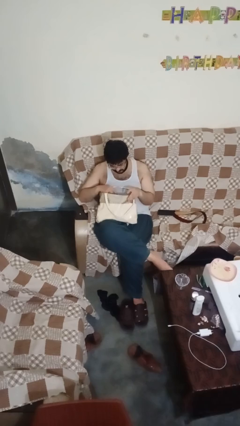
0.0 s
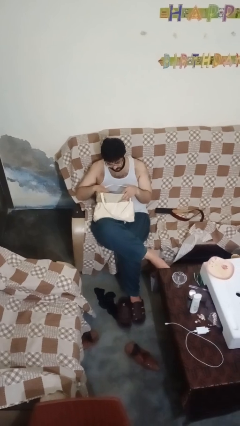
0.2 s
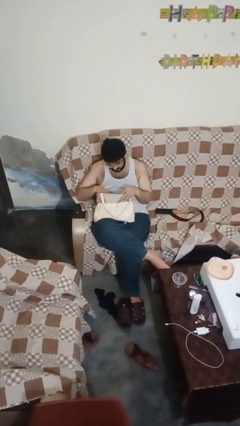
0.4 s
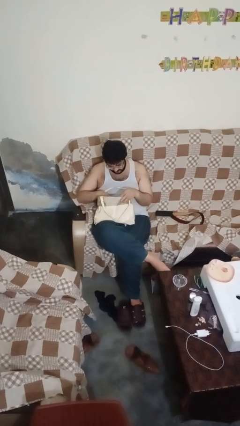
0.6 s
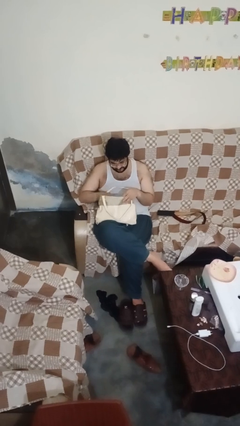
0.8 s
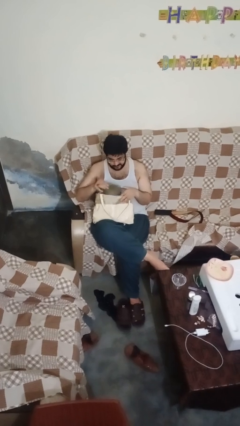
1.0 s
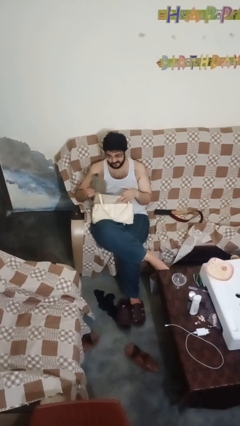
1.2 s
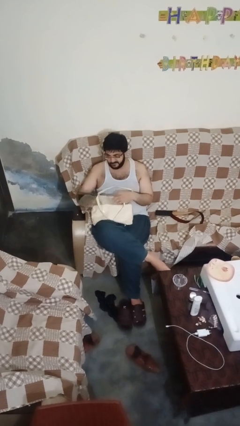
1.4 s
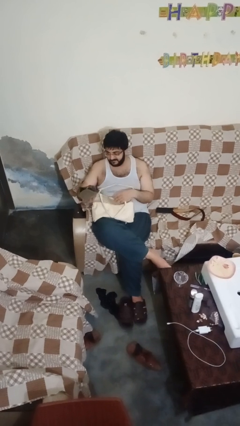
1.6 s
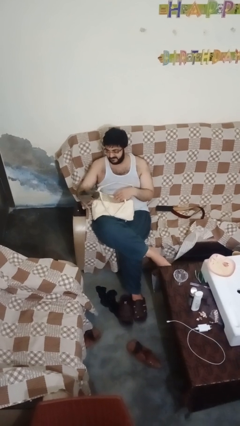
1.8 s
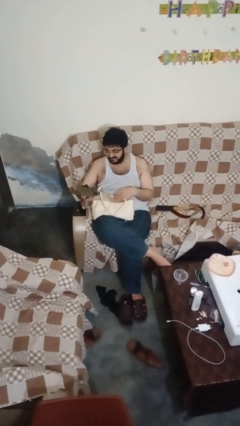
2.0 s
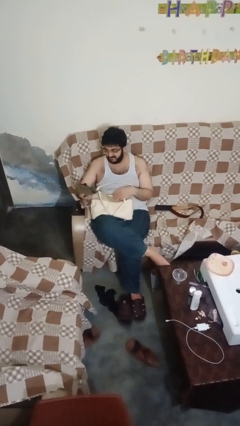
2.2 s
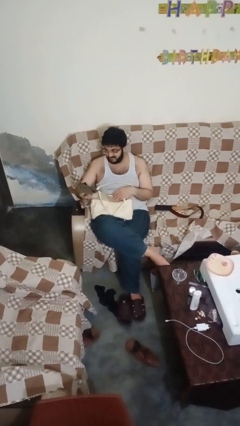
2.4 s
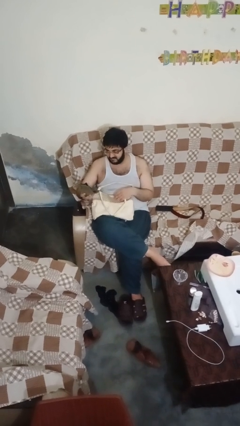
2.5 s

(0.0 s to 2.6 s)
person takes object from purse

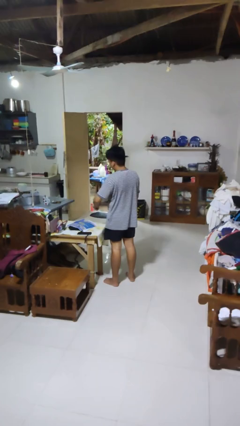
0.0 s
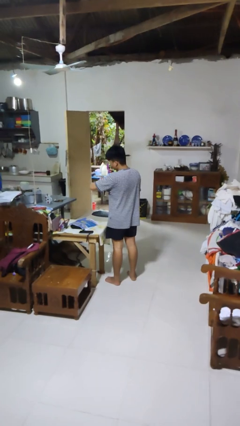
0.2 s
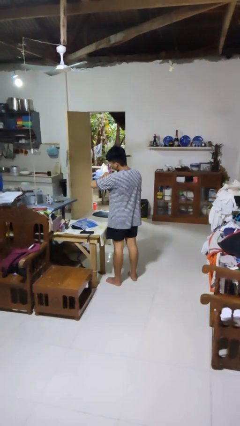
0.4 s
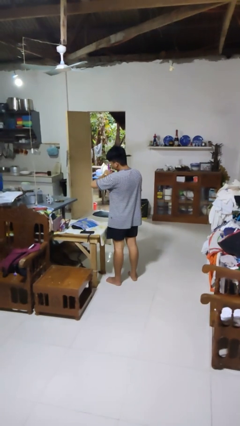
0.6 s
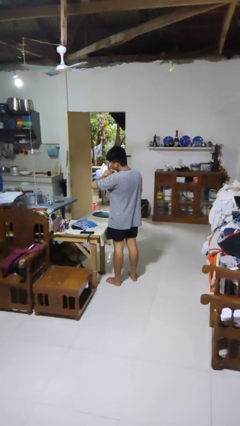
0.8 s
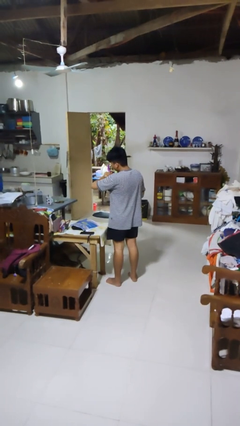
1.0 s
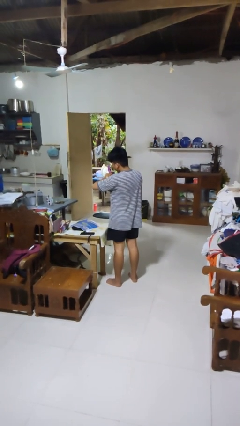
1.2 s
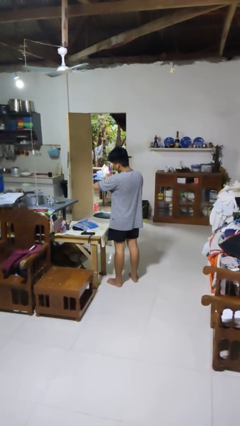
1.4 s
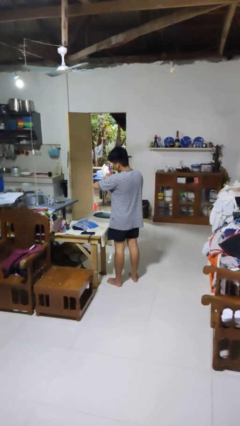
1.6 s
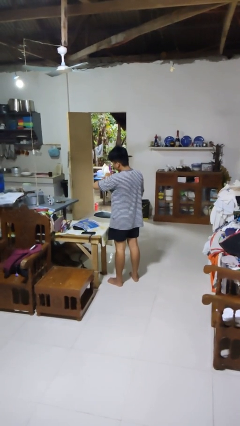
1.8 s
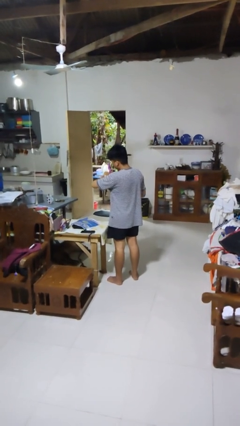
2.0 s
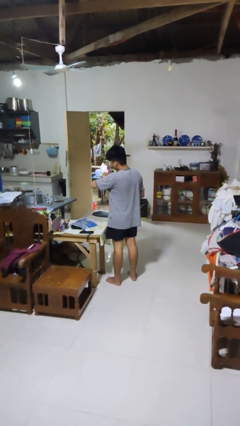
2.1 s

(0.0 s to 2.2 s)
person looks at wristwatch

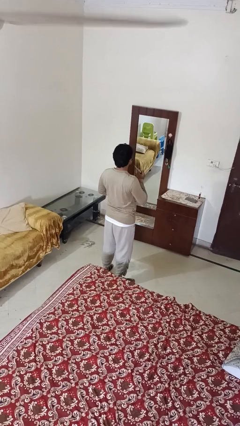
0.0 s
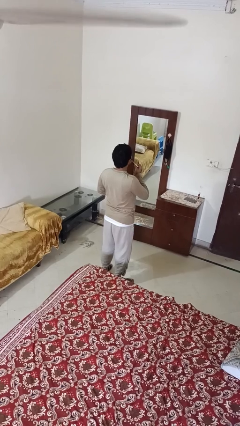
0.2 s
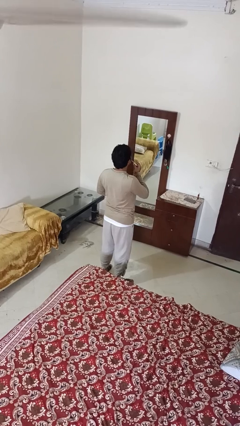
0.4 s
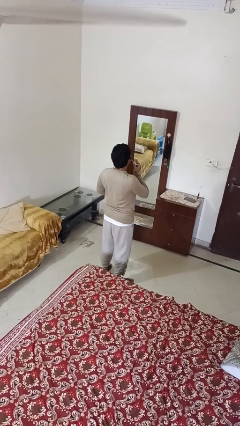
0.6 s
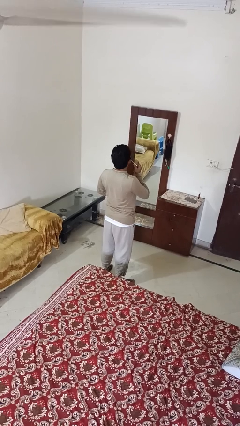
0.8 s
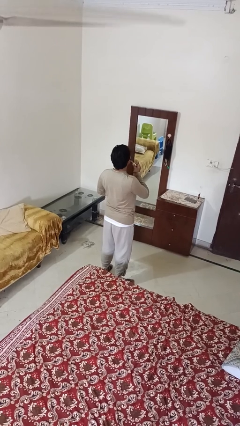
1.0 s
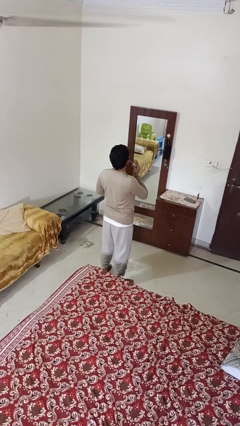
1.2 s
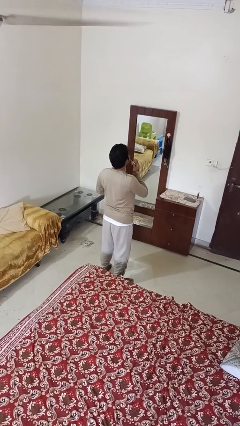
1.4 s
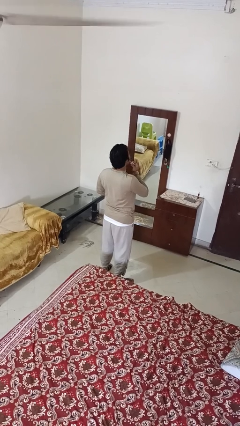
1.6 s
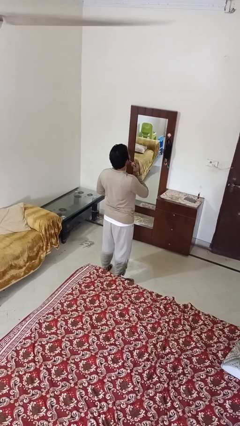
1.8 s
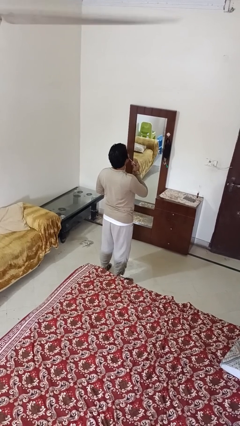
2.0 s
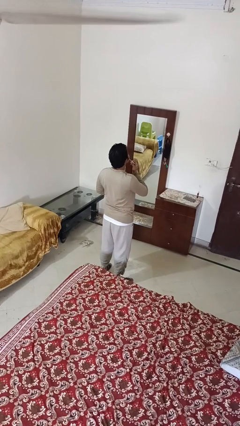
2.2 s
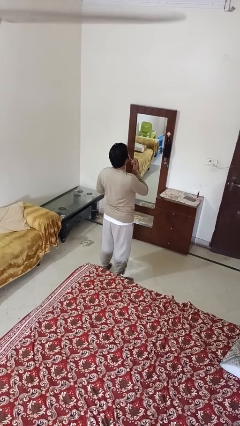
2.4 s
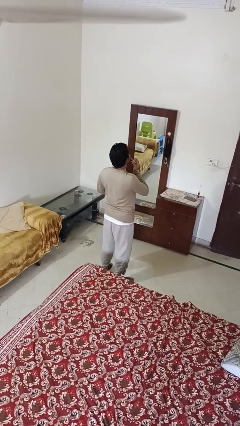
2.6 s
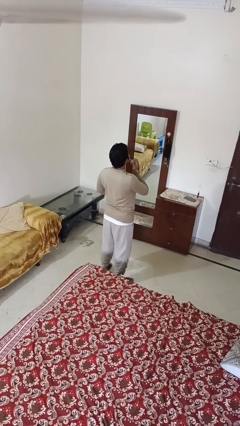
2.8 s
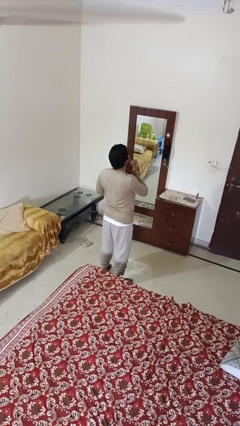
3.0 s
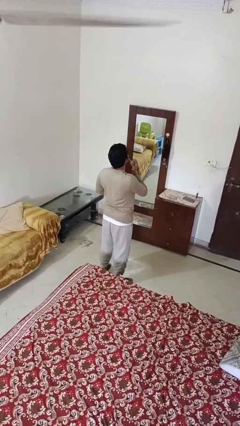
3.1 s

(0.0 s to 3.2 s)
person applies lip makeup

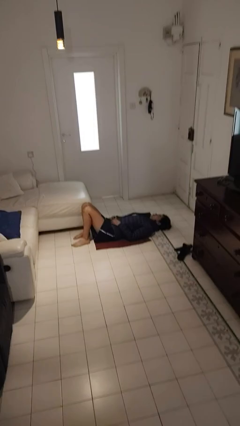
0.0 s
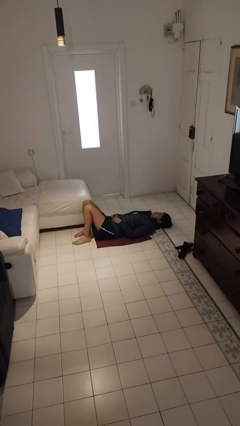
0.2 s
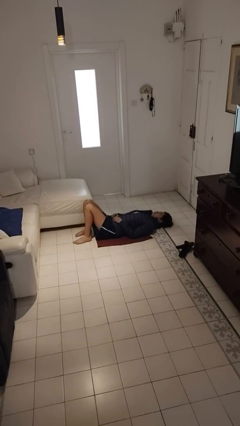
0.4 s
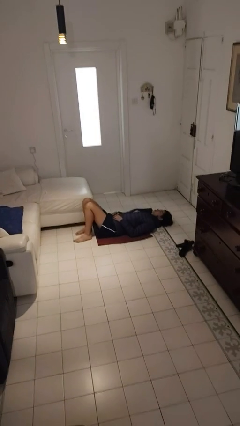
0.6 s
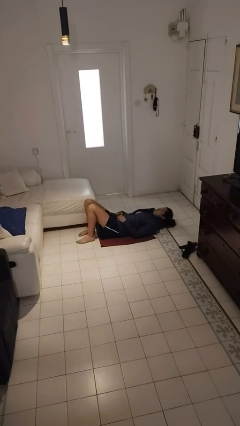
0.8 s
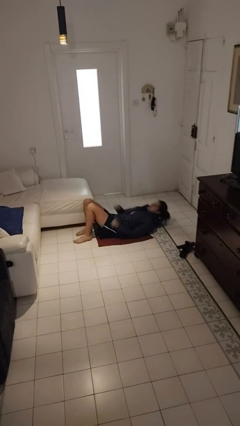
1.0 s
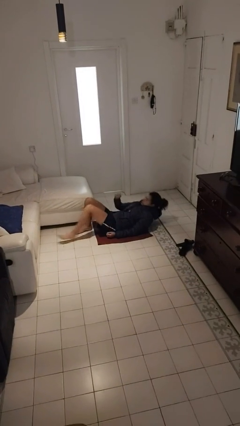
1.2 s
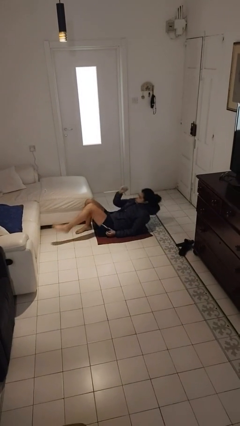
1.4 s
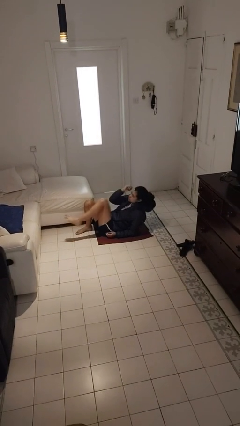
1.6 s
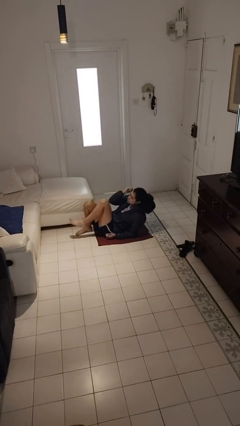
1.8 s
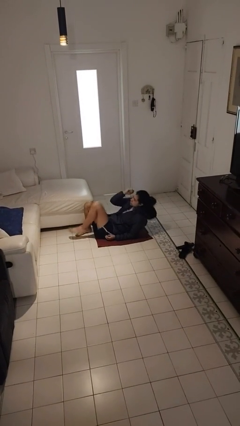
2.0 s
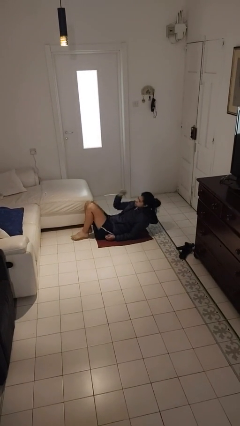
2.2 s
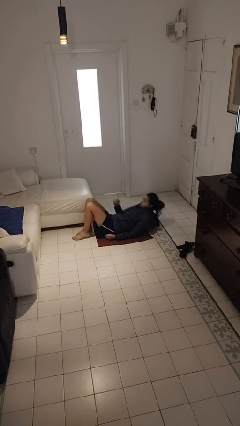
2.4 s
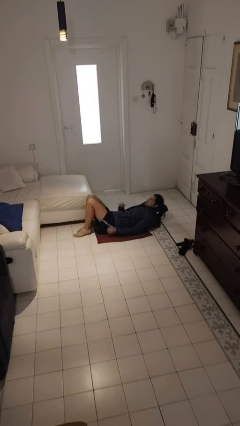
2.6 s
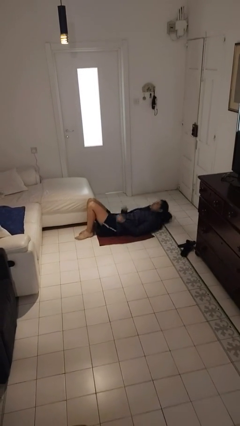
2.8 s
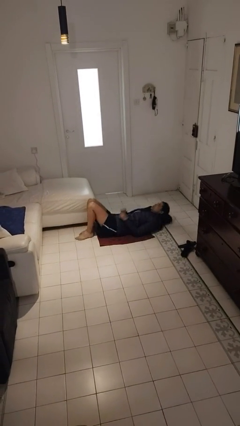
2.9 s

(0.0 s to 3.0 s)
person exercises with situp

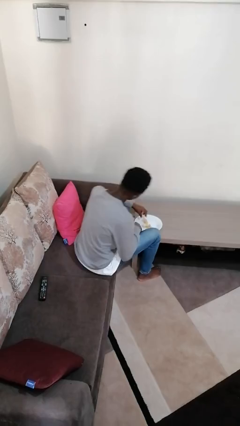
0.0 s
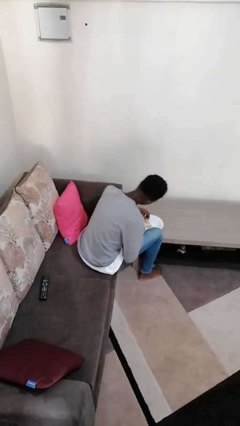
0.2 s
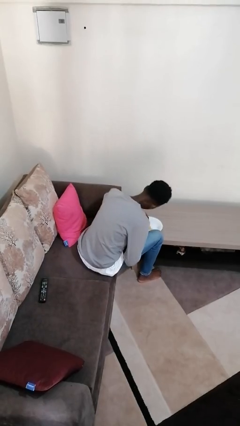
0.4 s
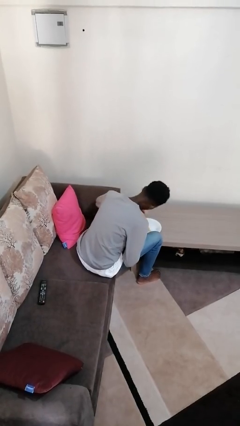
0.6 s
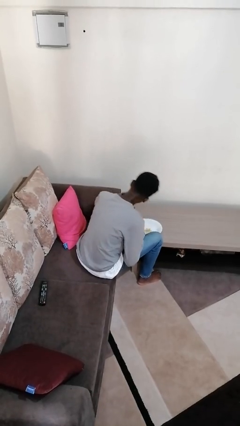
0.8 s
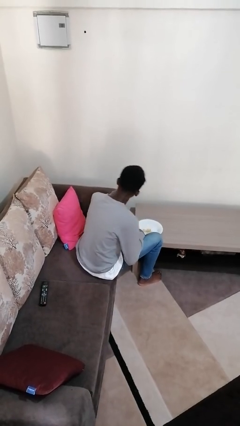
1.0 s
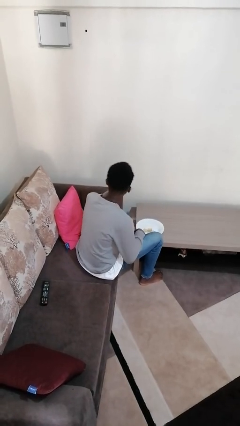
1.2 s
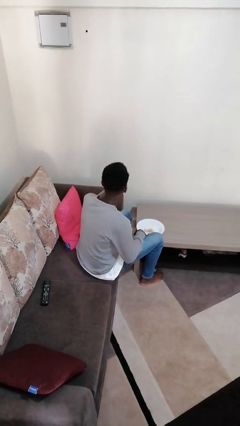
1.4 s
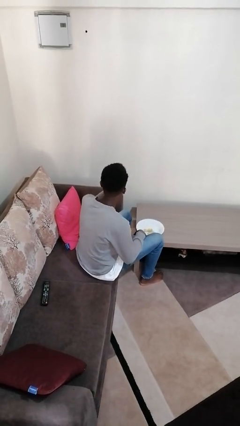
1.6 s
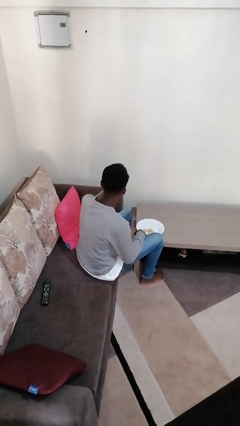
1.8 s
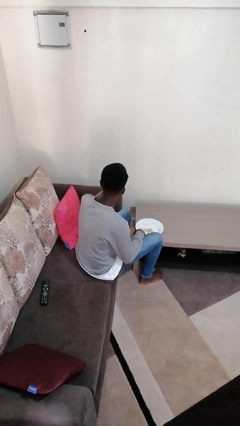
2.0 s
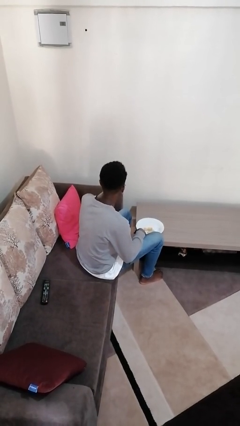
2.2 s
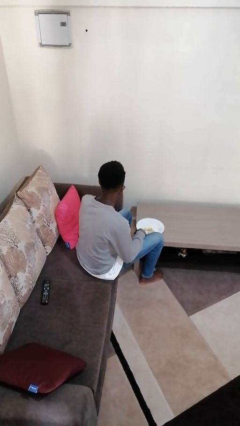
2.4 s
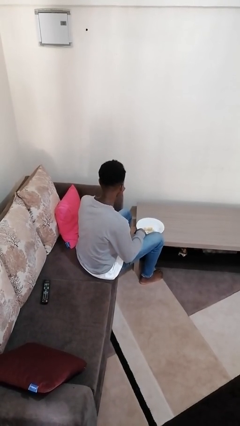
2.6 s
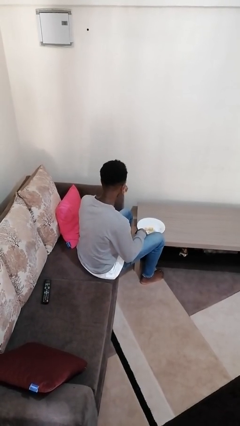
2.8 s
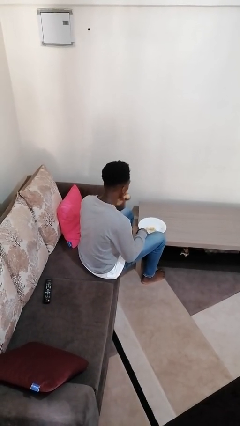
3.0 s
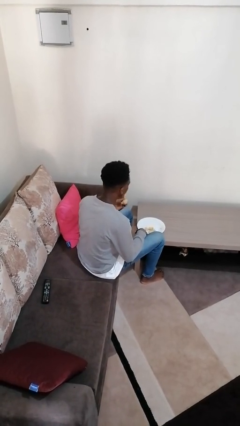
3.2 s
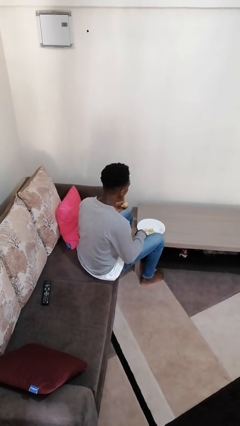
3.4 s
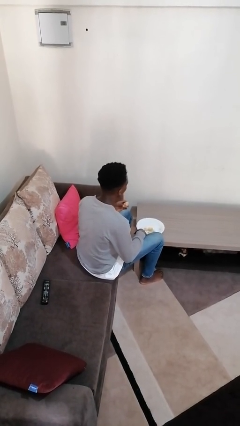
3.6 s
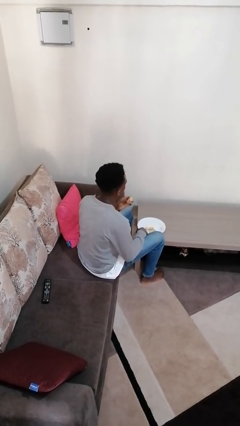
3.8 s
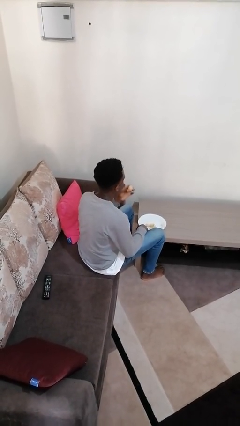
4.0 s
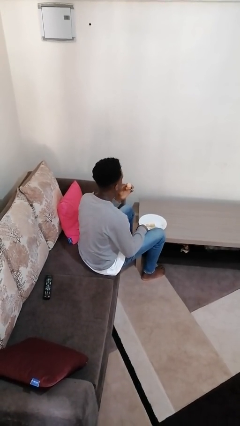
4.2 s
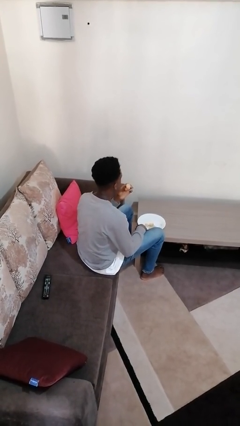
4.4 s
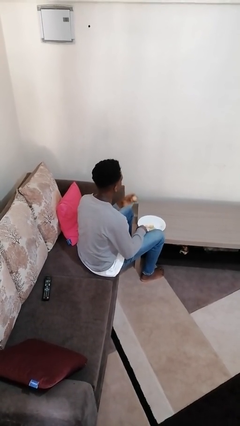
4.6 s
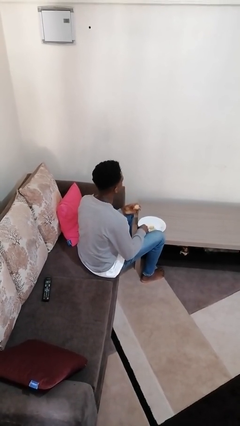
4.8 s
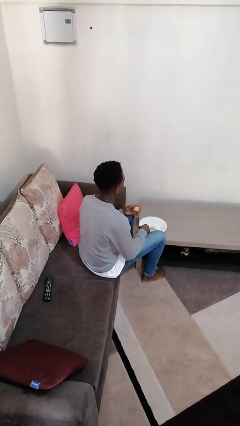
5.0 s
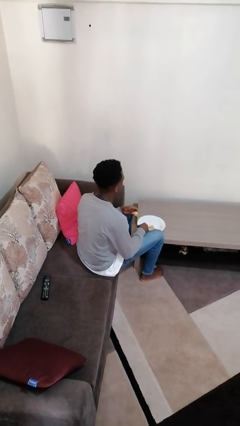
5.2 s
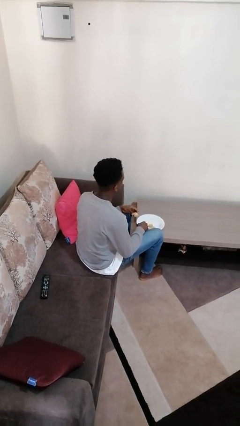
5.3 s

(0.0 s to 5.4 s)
person eats with hands

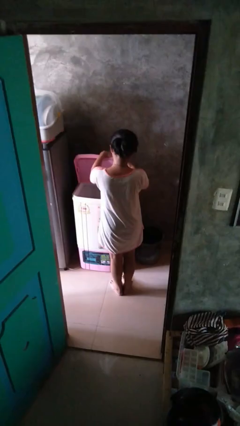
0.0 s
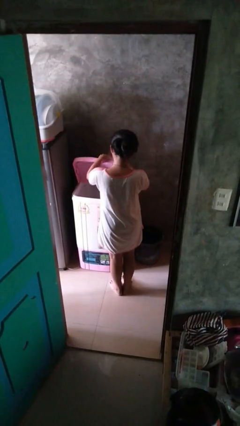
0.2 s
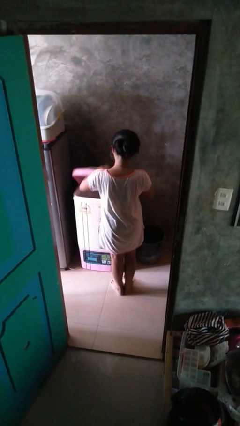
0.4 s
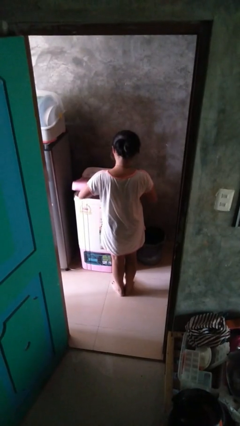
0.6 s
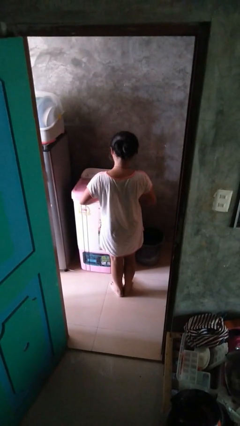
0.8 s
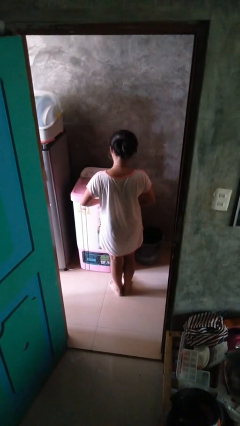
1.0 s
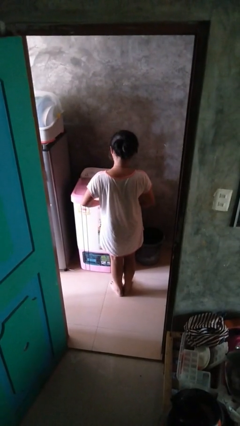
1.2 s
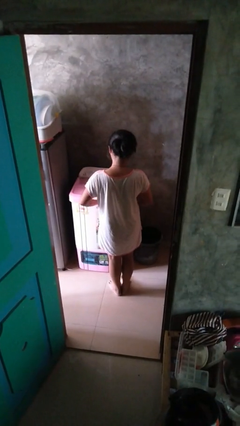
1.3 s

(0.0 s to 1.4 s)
person closes clothes washer
